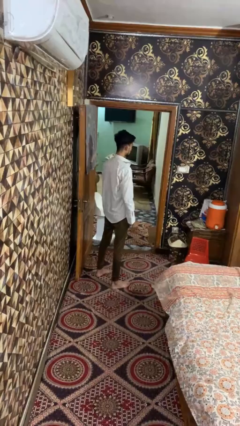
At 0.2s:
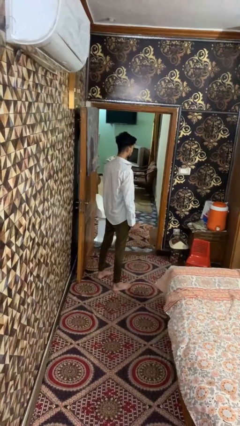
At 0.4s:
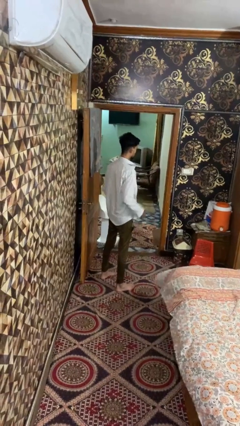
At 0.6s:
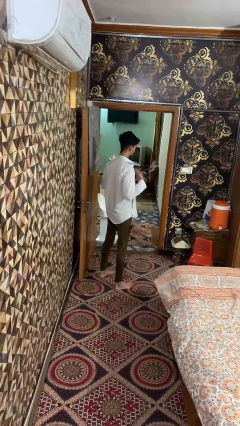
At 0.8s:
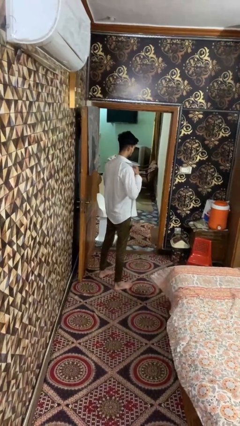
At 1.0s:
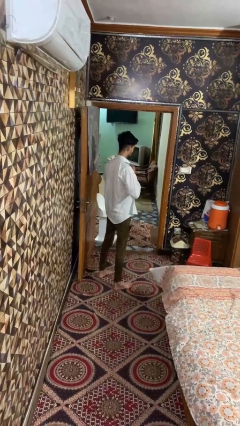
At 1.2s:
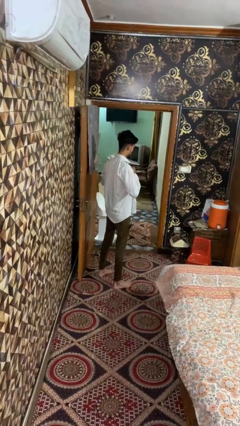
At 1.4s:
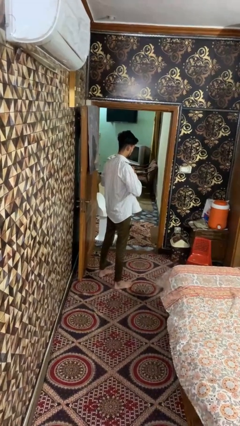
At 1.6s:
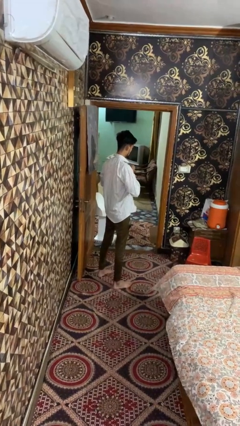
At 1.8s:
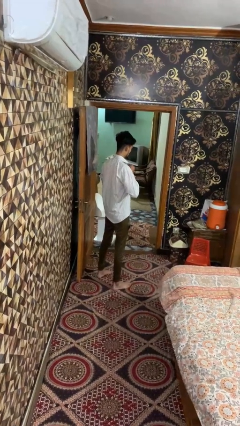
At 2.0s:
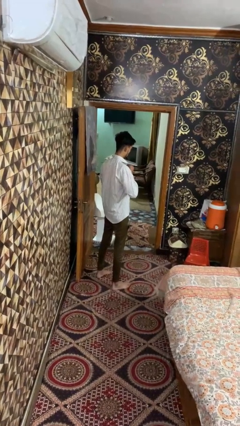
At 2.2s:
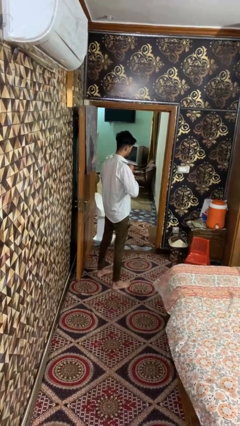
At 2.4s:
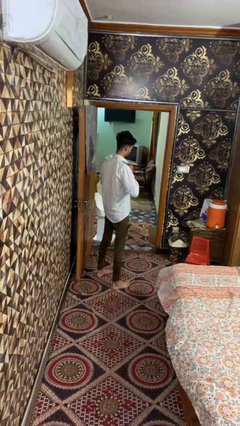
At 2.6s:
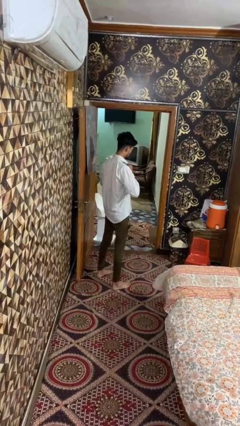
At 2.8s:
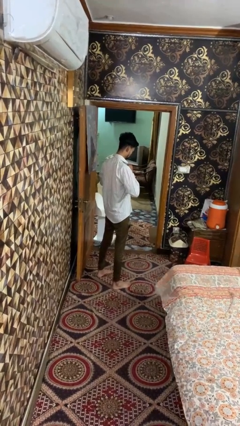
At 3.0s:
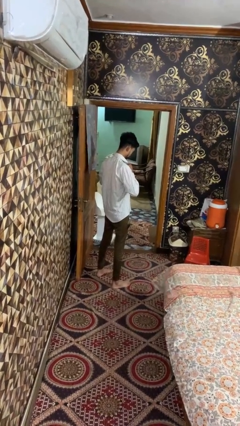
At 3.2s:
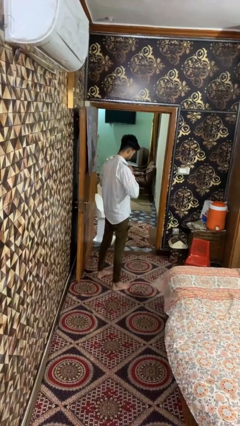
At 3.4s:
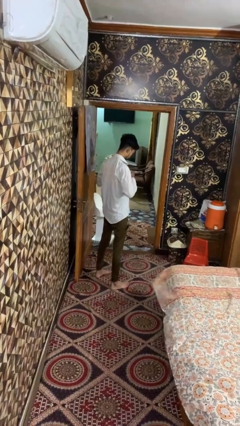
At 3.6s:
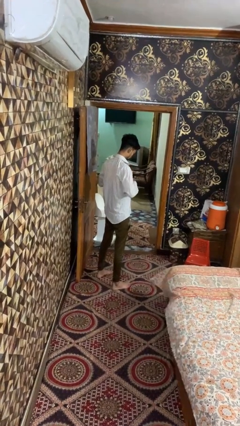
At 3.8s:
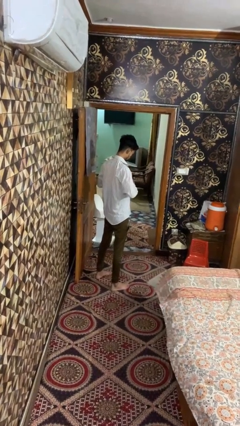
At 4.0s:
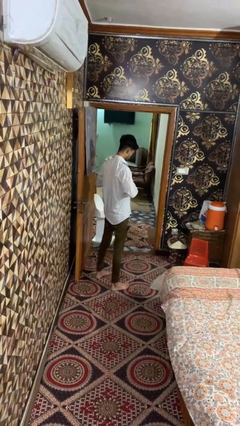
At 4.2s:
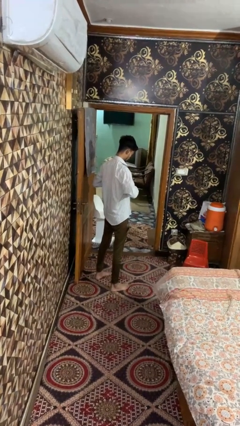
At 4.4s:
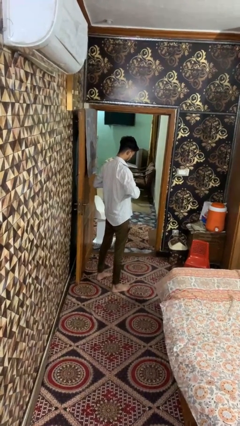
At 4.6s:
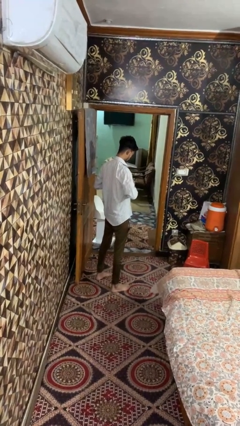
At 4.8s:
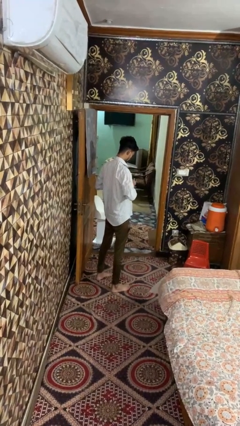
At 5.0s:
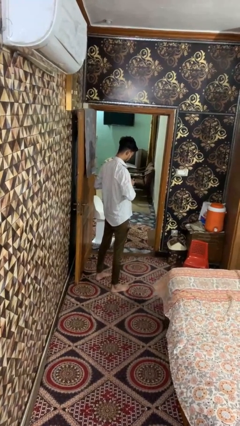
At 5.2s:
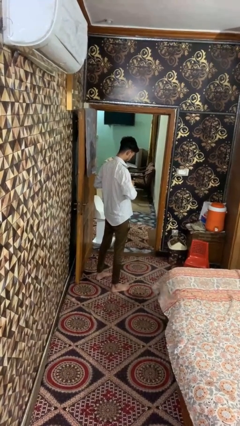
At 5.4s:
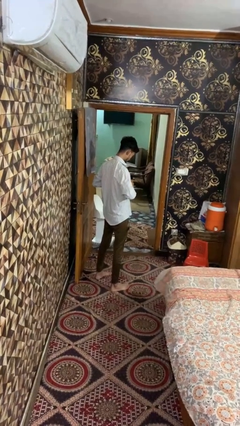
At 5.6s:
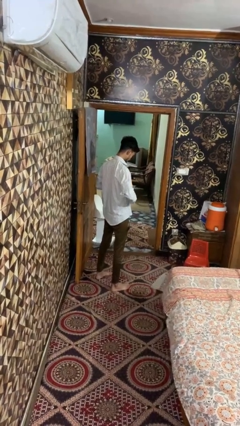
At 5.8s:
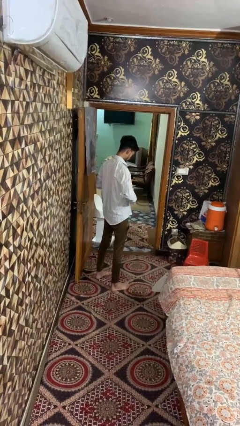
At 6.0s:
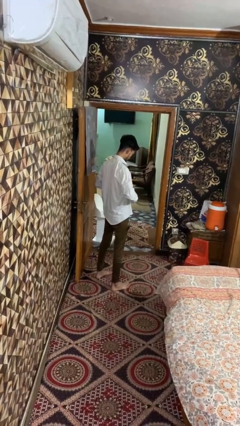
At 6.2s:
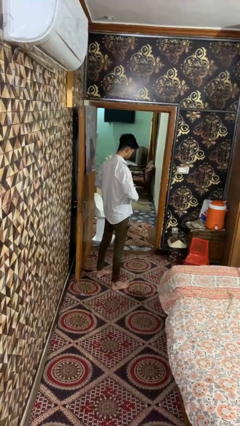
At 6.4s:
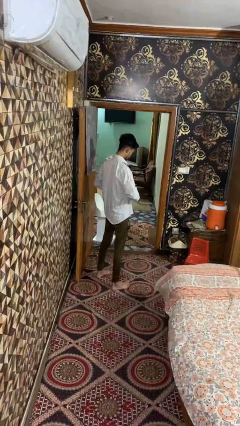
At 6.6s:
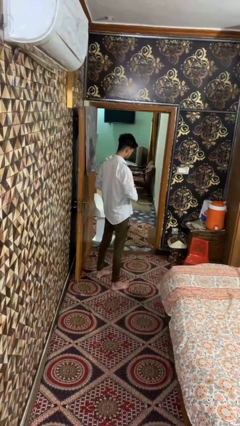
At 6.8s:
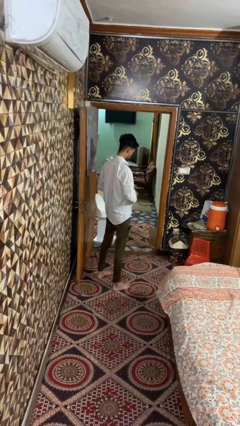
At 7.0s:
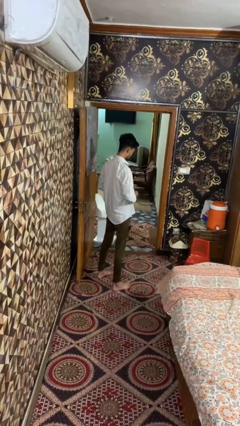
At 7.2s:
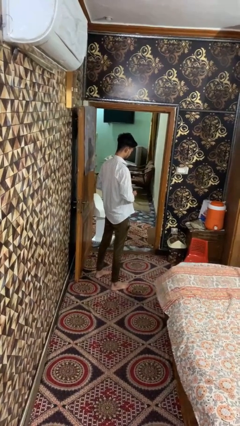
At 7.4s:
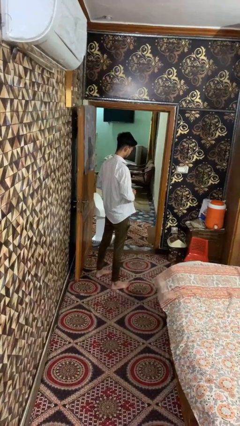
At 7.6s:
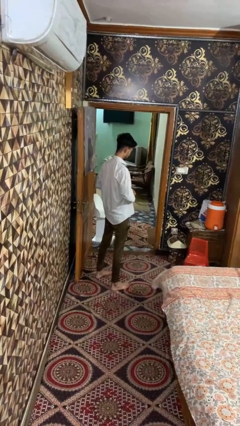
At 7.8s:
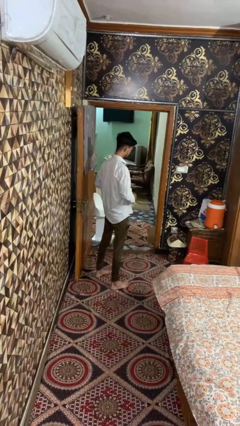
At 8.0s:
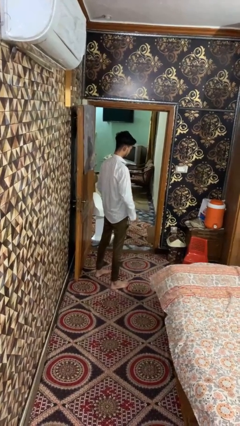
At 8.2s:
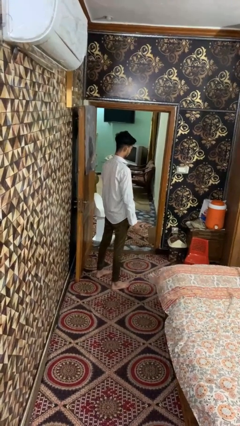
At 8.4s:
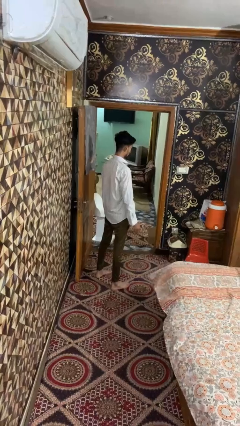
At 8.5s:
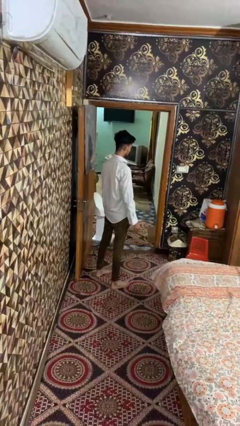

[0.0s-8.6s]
person buttons shirt

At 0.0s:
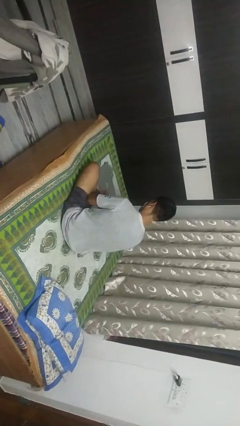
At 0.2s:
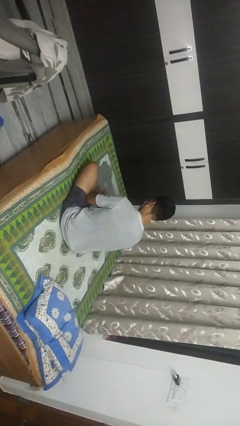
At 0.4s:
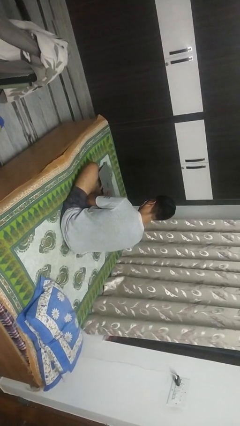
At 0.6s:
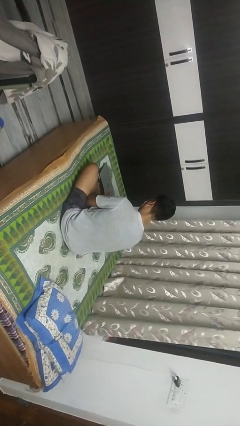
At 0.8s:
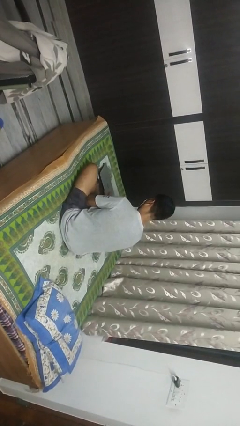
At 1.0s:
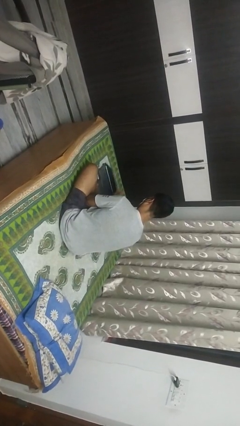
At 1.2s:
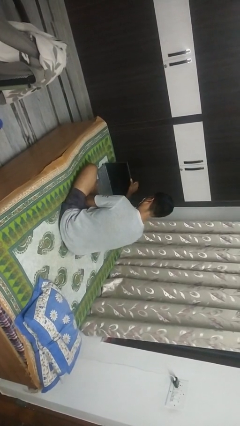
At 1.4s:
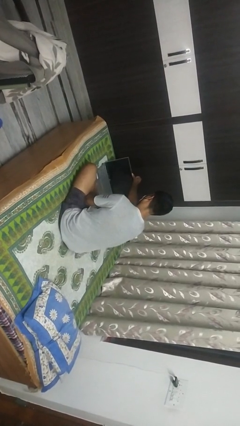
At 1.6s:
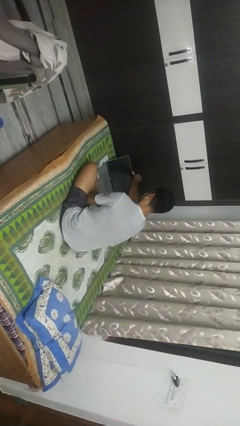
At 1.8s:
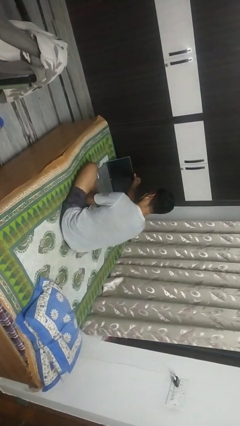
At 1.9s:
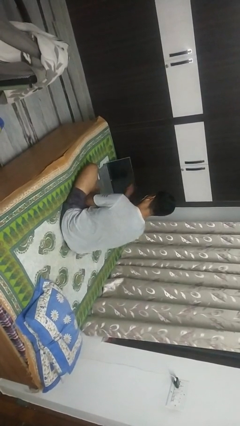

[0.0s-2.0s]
person opens laptop

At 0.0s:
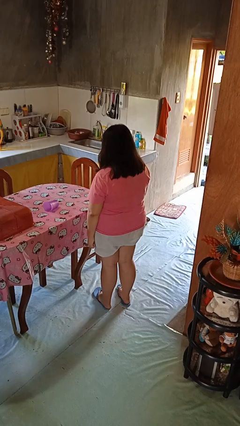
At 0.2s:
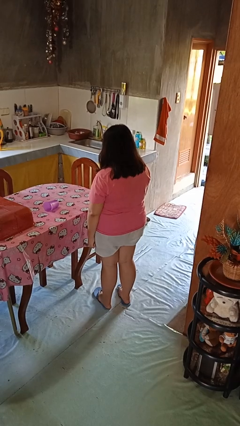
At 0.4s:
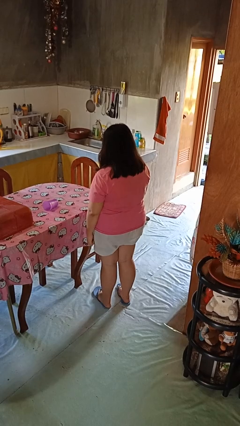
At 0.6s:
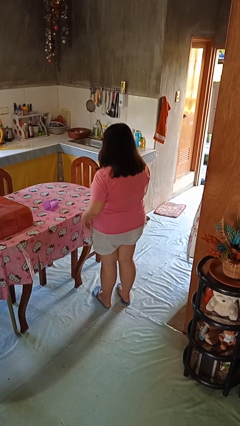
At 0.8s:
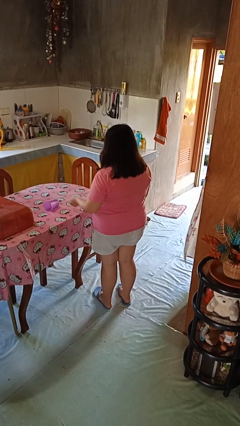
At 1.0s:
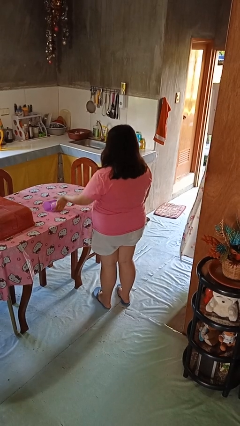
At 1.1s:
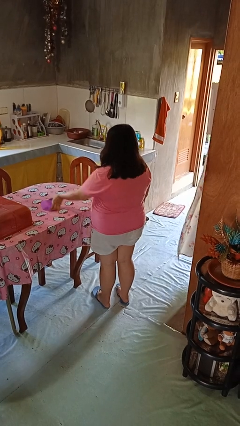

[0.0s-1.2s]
person sets upright glass

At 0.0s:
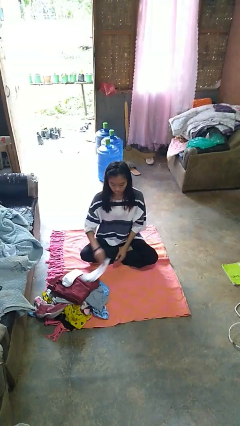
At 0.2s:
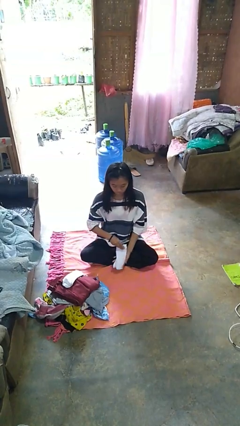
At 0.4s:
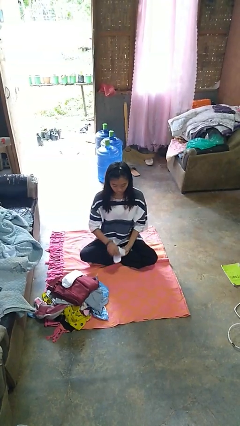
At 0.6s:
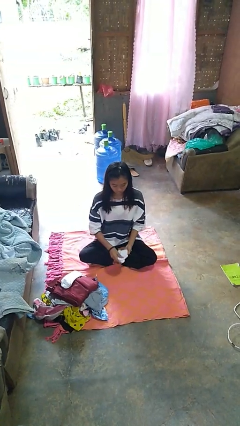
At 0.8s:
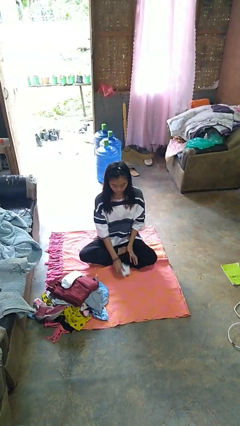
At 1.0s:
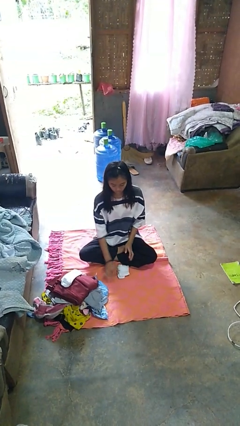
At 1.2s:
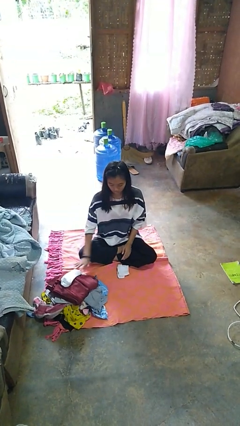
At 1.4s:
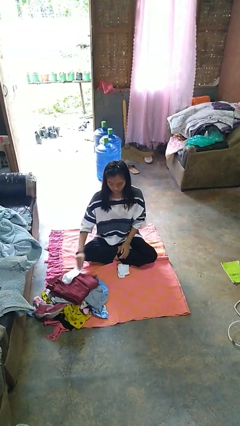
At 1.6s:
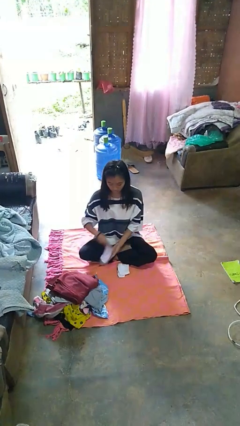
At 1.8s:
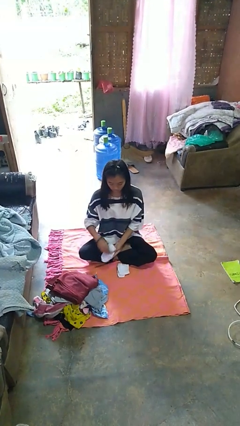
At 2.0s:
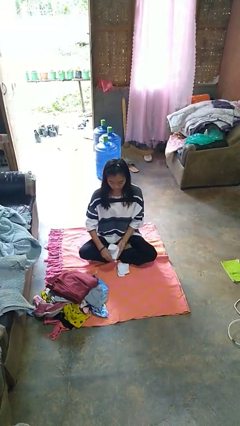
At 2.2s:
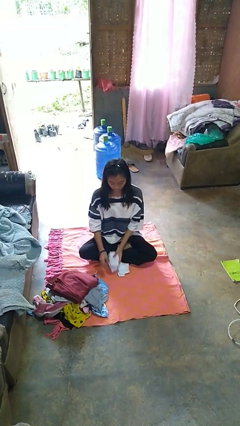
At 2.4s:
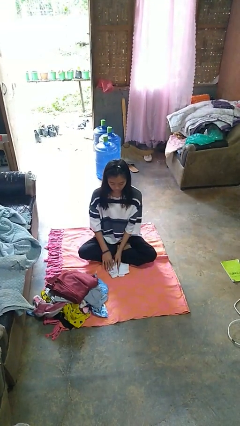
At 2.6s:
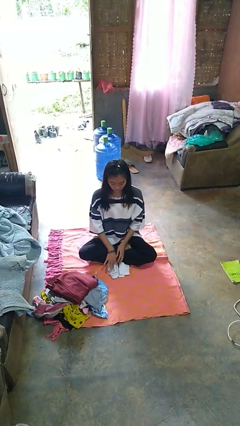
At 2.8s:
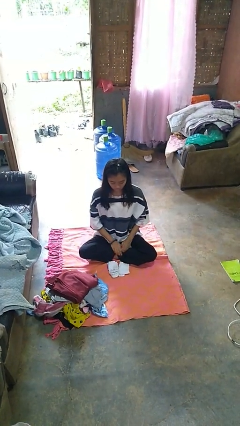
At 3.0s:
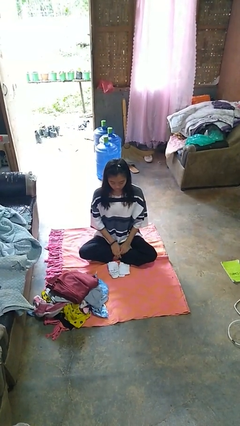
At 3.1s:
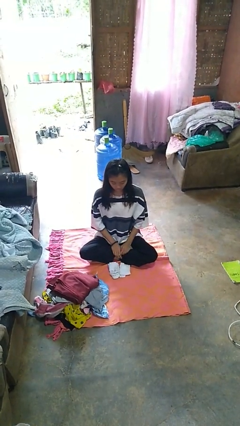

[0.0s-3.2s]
person folds socks

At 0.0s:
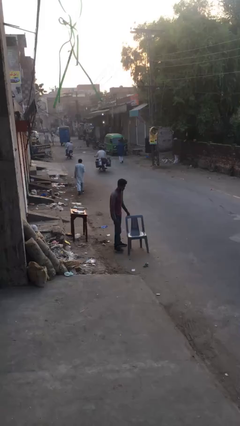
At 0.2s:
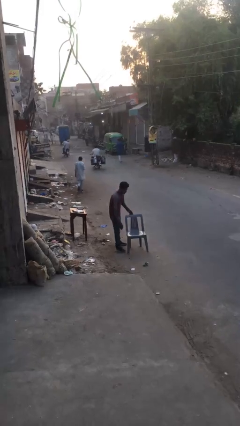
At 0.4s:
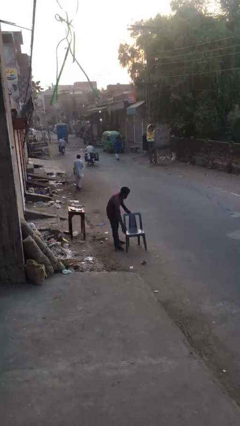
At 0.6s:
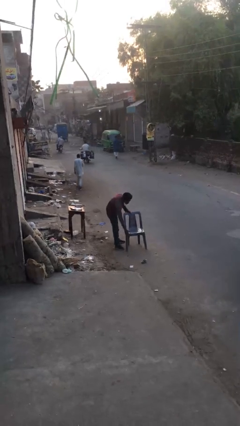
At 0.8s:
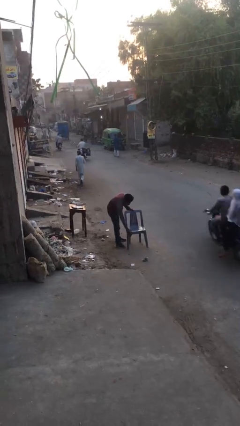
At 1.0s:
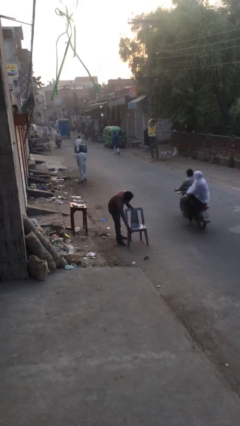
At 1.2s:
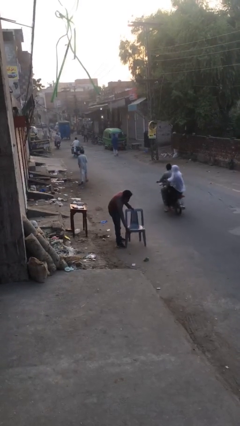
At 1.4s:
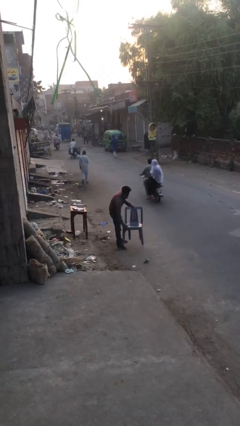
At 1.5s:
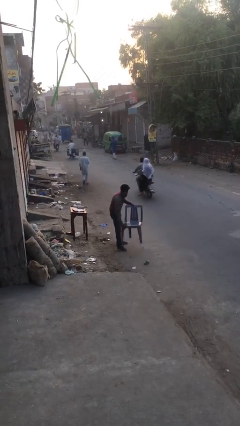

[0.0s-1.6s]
person picks up object from floor

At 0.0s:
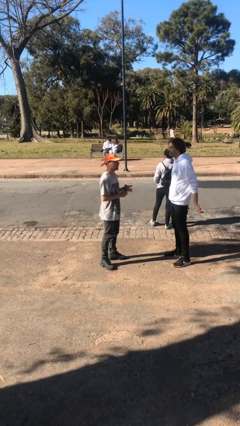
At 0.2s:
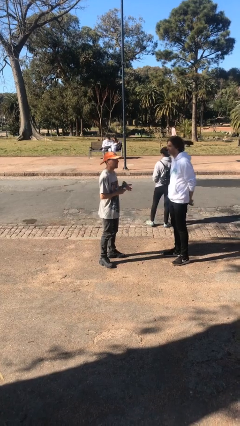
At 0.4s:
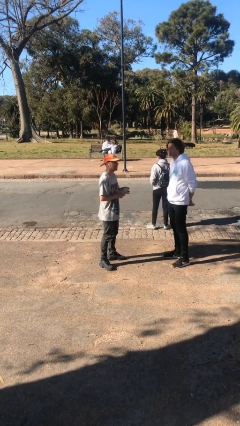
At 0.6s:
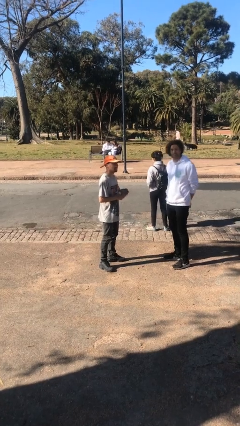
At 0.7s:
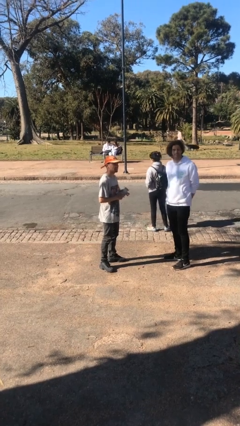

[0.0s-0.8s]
person laughs with person

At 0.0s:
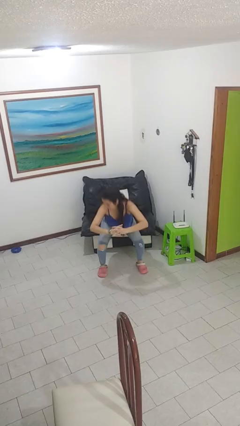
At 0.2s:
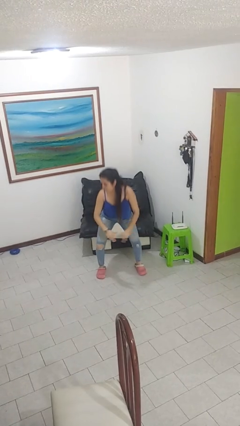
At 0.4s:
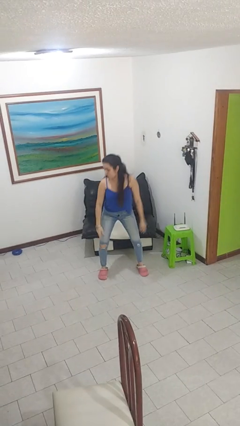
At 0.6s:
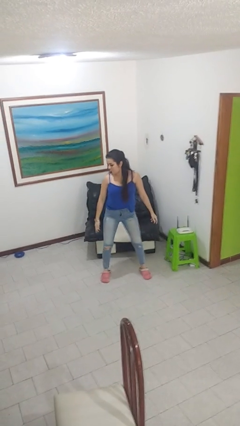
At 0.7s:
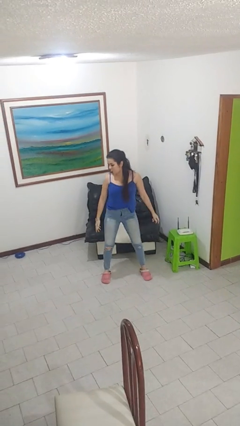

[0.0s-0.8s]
person stands up
